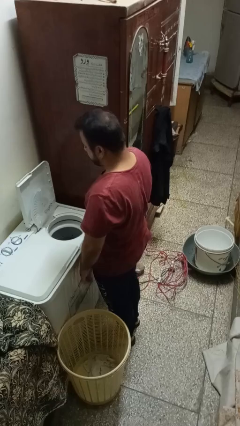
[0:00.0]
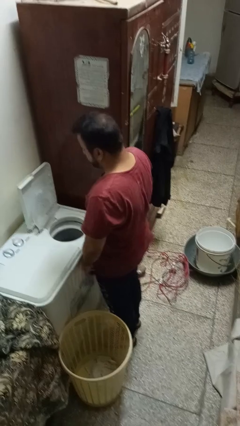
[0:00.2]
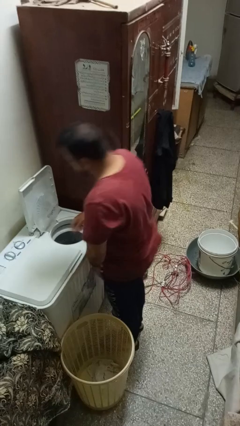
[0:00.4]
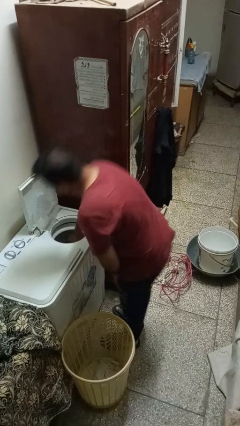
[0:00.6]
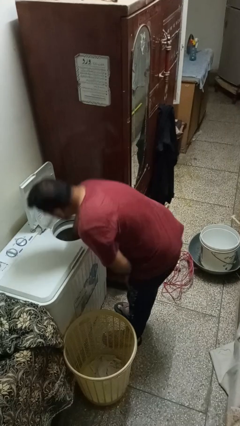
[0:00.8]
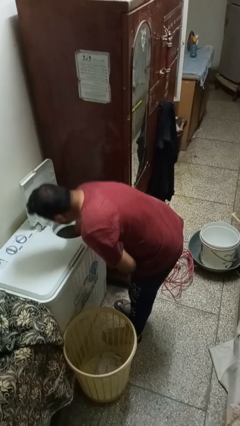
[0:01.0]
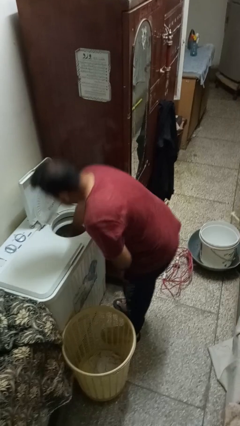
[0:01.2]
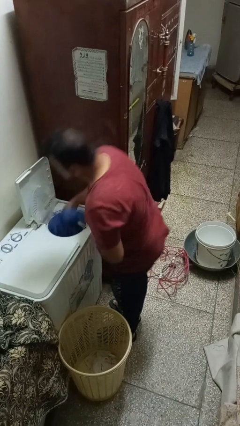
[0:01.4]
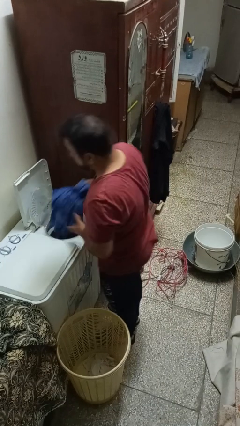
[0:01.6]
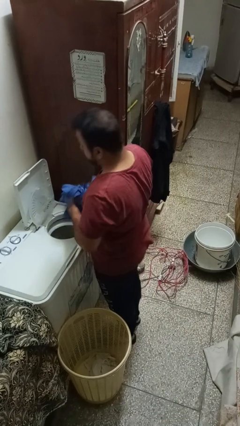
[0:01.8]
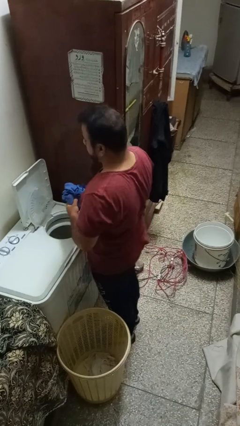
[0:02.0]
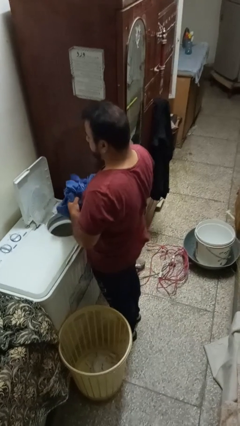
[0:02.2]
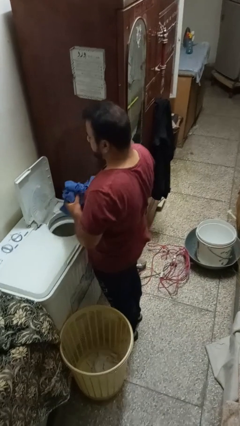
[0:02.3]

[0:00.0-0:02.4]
person unloads dryer

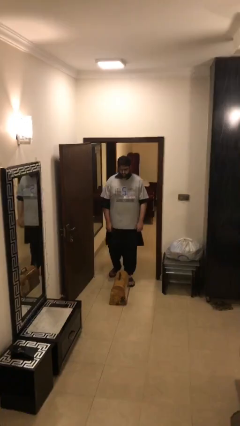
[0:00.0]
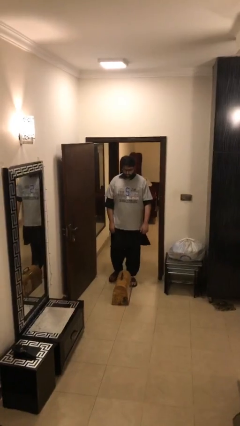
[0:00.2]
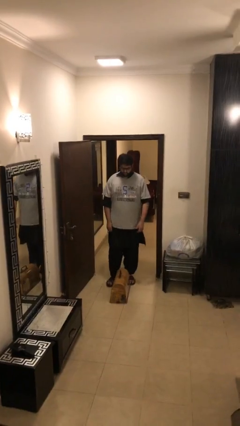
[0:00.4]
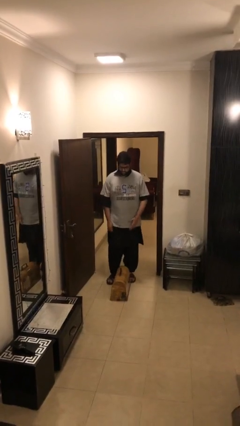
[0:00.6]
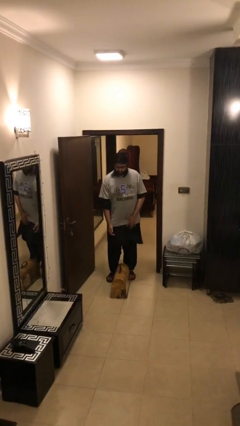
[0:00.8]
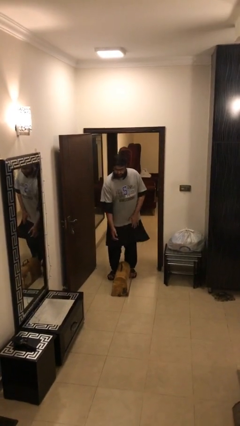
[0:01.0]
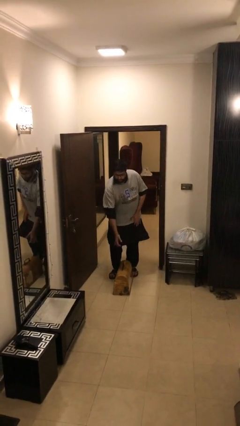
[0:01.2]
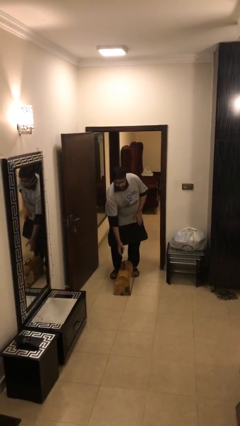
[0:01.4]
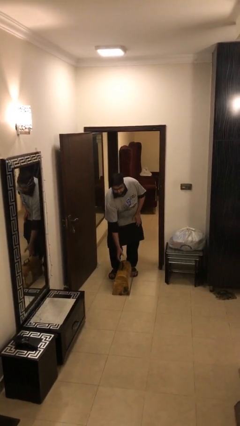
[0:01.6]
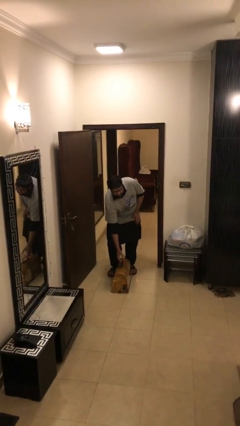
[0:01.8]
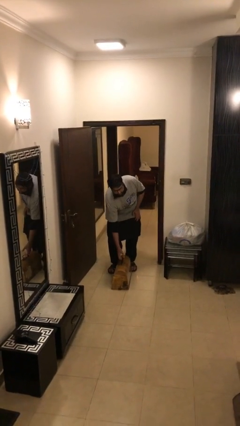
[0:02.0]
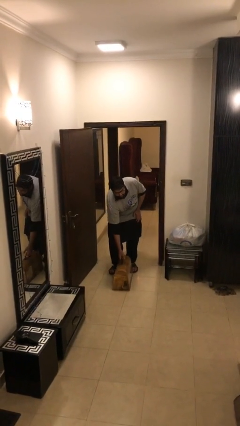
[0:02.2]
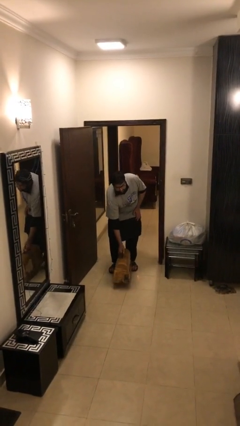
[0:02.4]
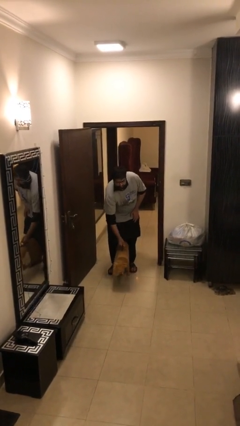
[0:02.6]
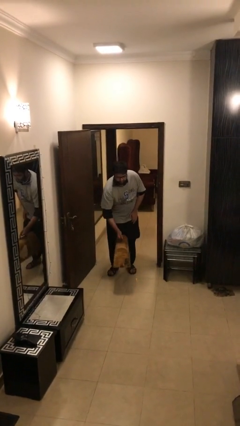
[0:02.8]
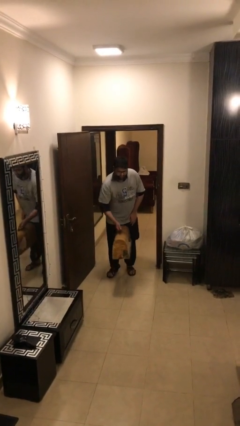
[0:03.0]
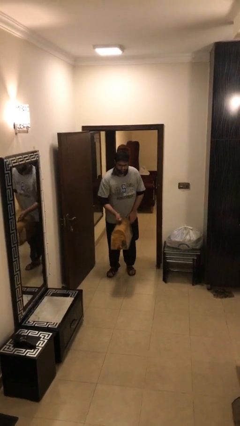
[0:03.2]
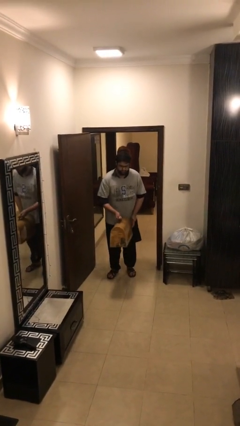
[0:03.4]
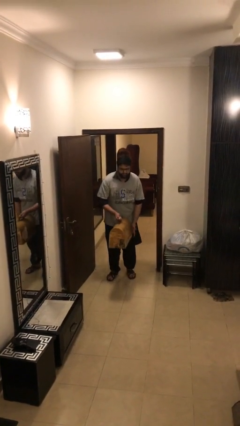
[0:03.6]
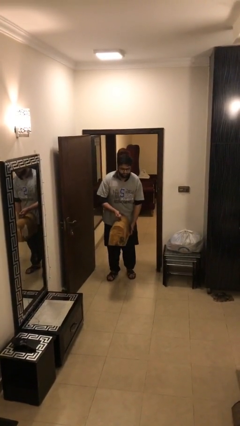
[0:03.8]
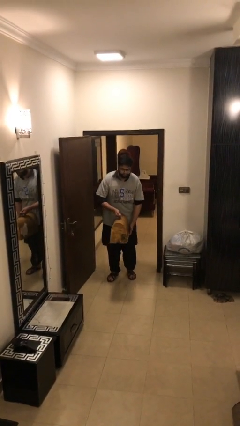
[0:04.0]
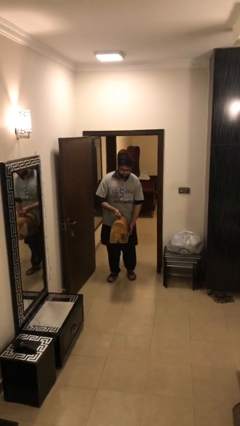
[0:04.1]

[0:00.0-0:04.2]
person picks up object from floor

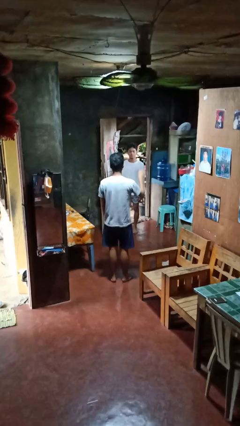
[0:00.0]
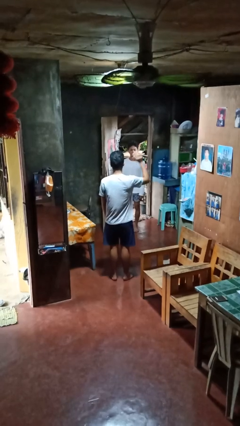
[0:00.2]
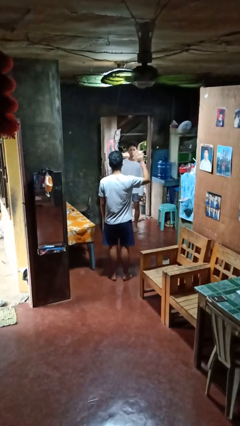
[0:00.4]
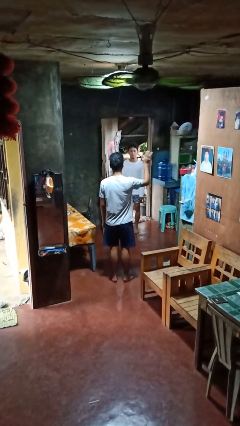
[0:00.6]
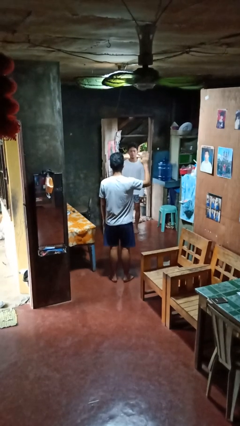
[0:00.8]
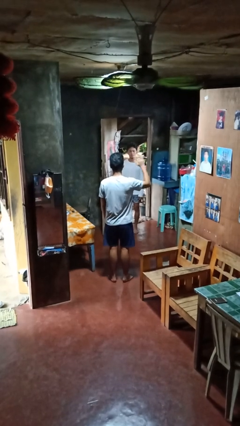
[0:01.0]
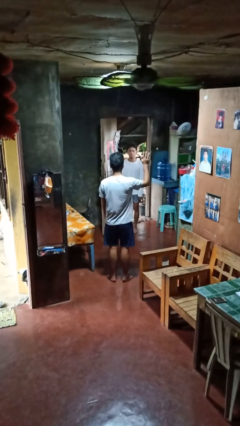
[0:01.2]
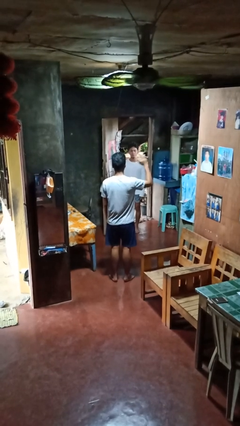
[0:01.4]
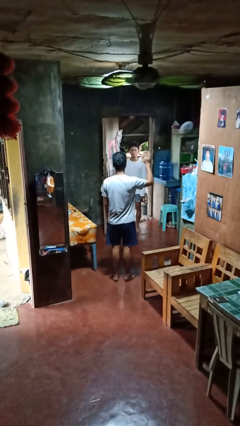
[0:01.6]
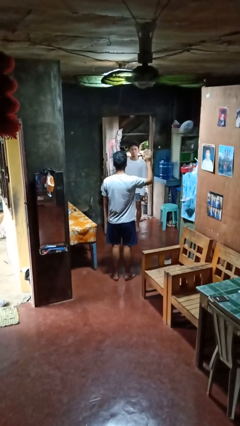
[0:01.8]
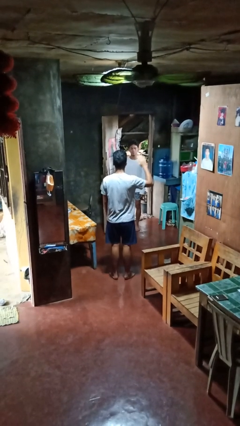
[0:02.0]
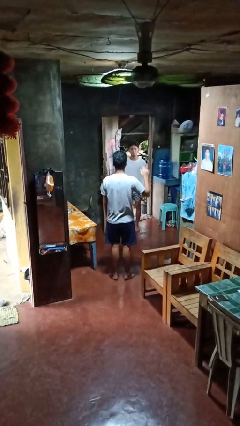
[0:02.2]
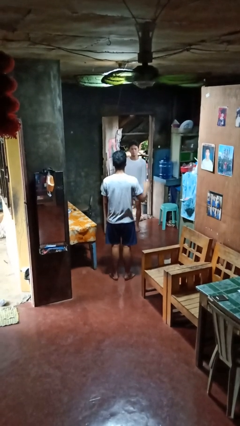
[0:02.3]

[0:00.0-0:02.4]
person waves at person

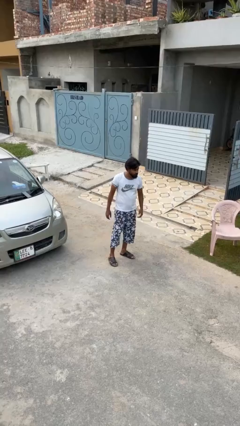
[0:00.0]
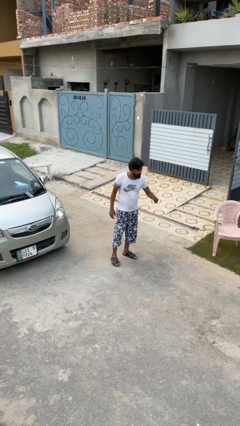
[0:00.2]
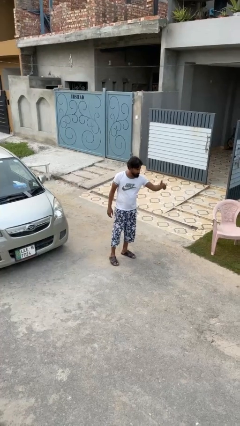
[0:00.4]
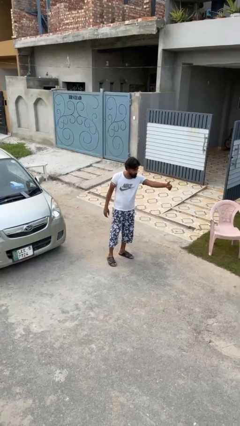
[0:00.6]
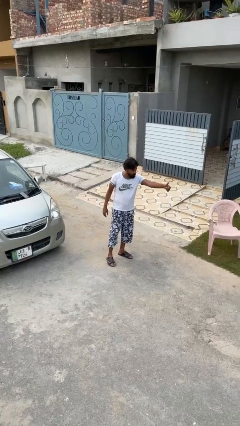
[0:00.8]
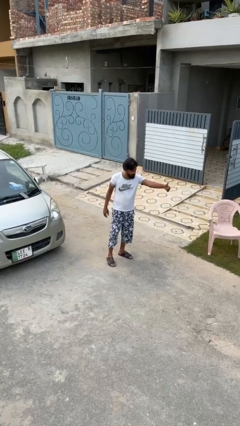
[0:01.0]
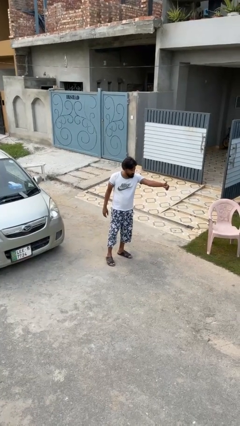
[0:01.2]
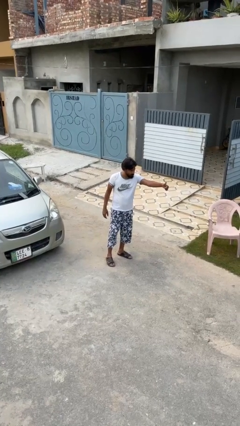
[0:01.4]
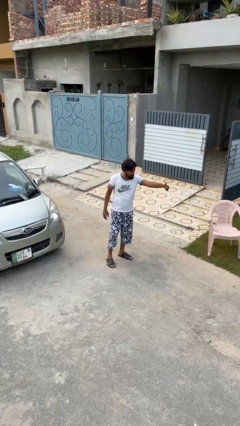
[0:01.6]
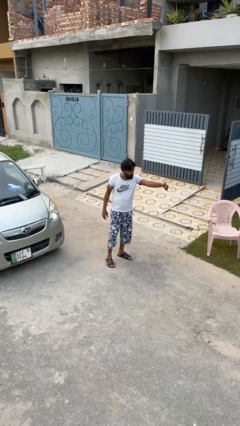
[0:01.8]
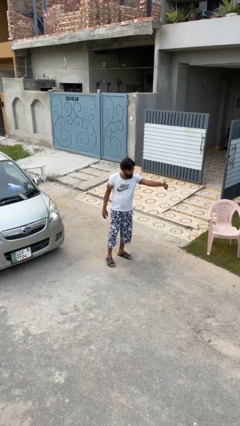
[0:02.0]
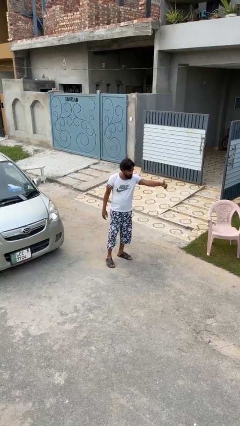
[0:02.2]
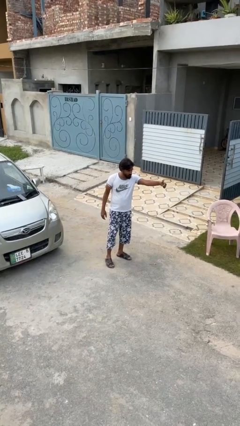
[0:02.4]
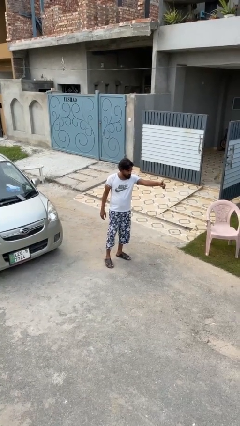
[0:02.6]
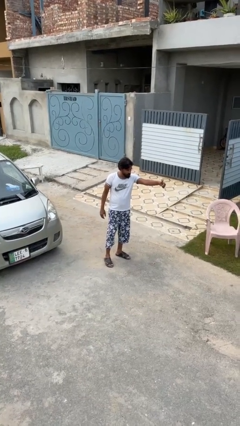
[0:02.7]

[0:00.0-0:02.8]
person gestures thumbs up

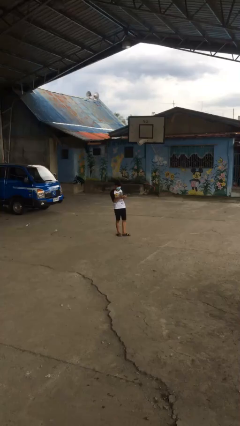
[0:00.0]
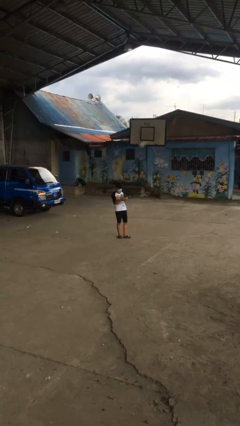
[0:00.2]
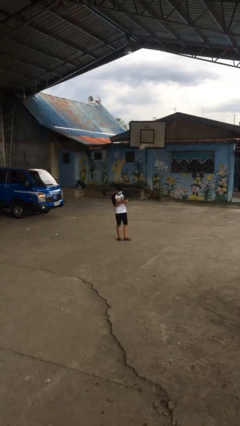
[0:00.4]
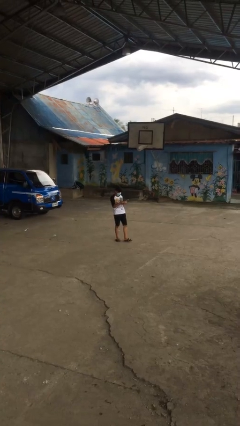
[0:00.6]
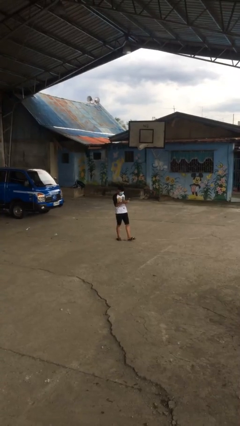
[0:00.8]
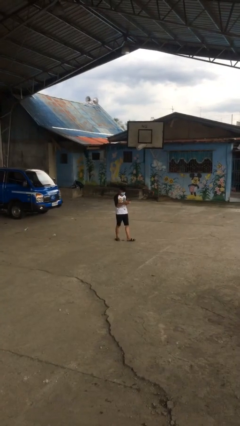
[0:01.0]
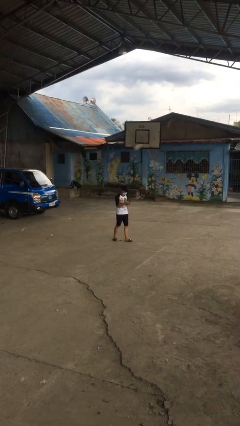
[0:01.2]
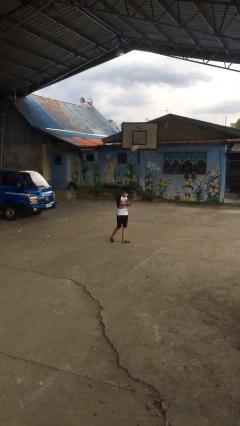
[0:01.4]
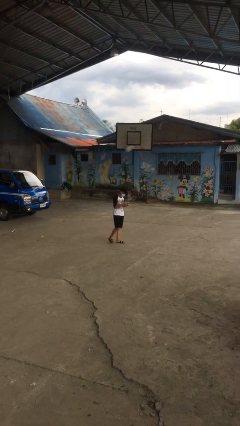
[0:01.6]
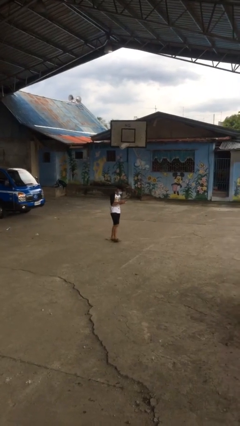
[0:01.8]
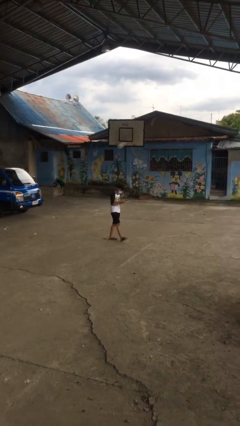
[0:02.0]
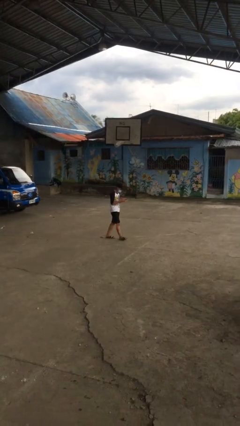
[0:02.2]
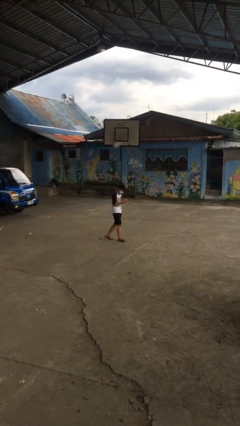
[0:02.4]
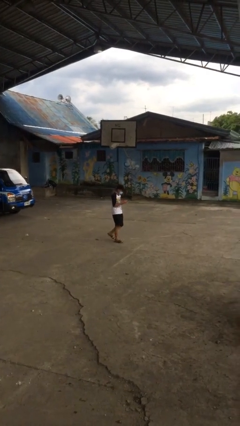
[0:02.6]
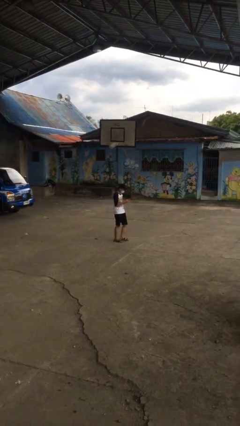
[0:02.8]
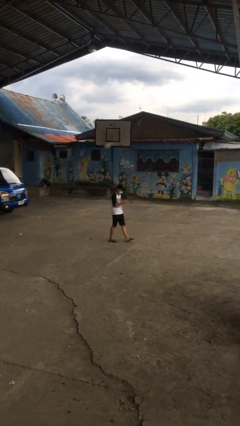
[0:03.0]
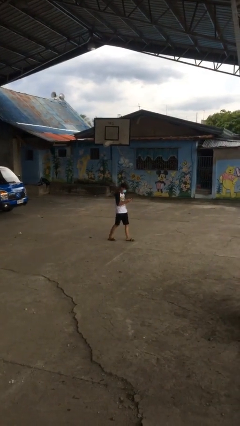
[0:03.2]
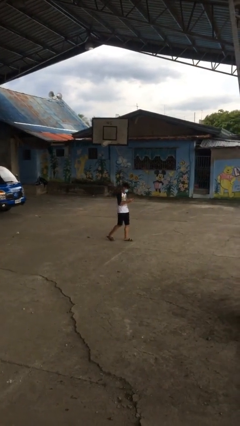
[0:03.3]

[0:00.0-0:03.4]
person texts on phone

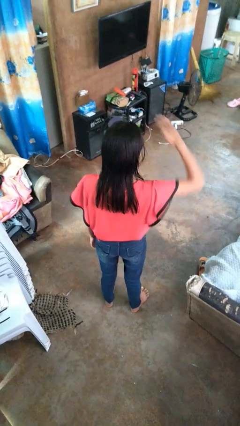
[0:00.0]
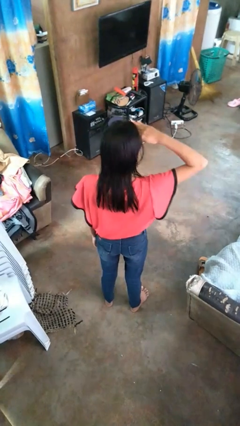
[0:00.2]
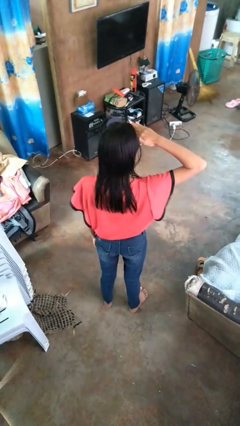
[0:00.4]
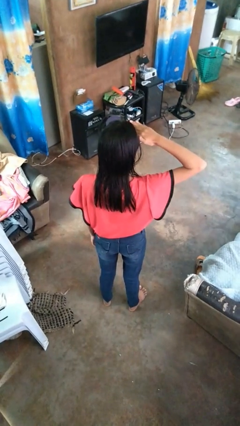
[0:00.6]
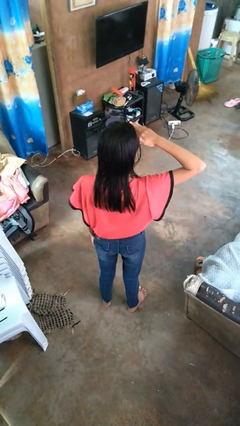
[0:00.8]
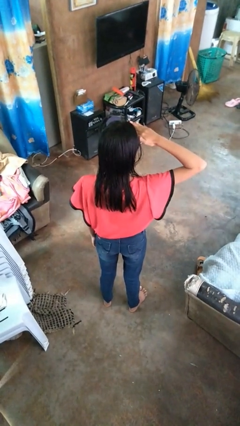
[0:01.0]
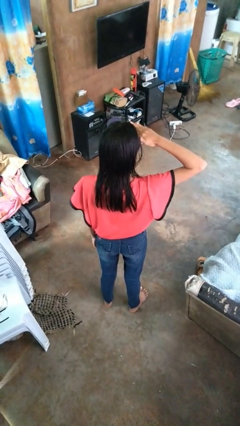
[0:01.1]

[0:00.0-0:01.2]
person salutes

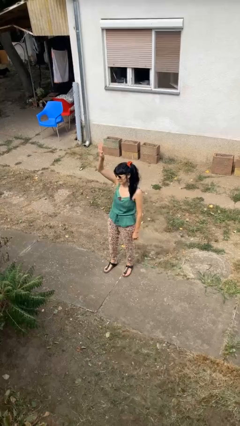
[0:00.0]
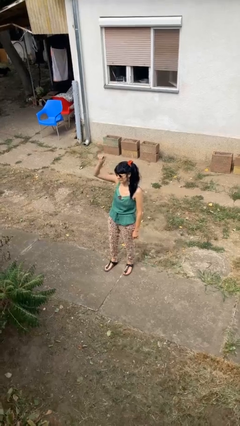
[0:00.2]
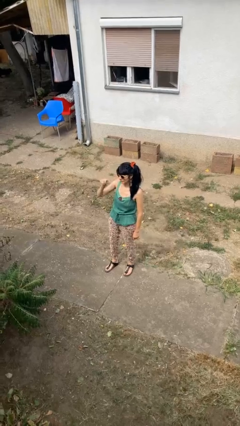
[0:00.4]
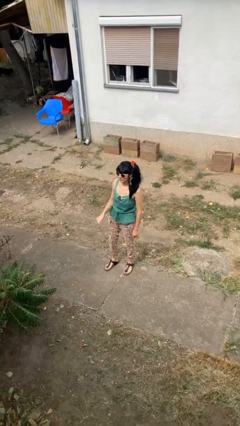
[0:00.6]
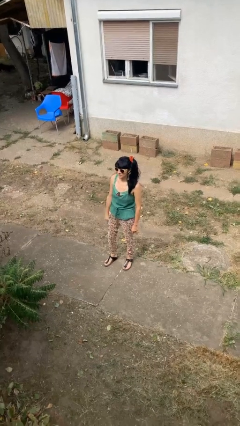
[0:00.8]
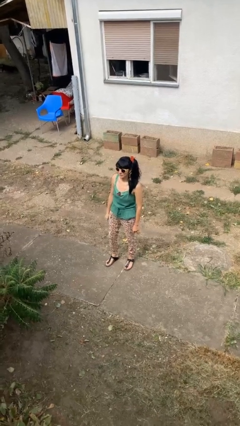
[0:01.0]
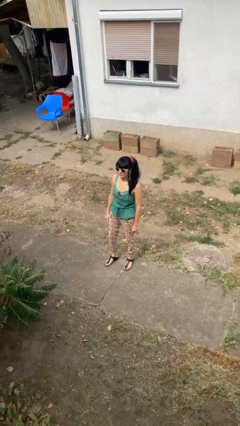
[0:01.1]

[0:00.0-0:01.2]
person gestures lower hand
